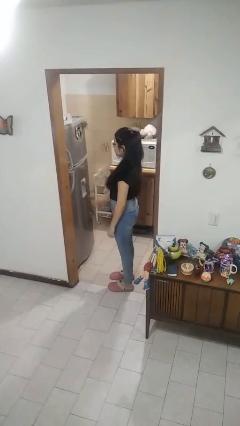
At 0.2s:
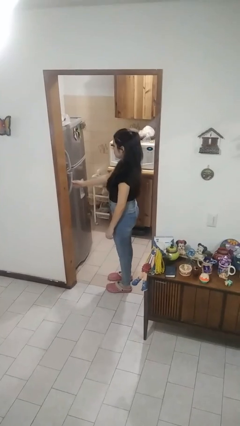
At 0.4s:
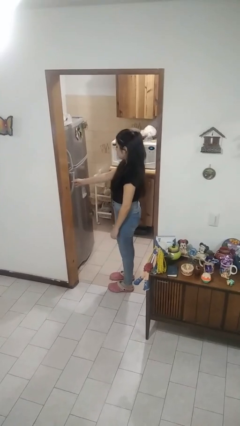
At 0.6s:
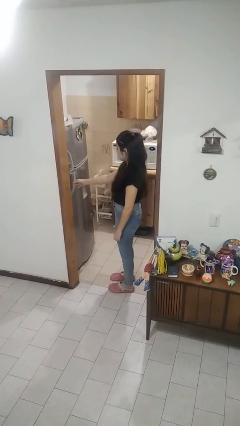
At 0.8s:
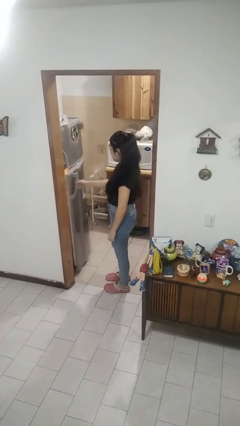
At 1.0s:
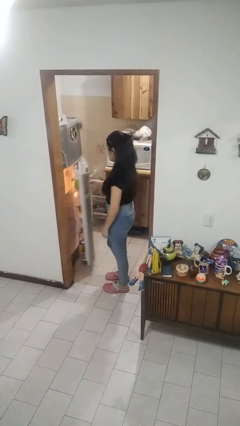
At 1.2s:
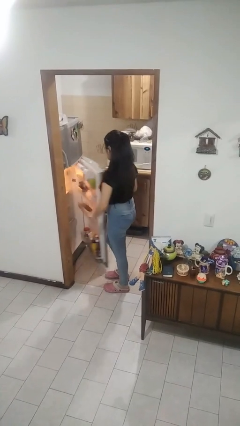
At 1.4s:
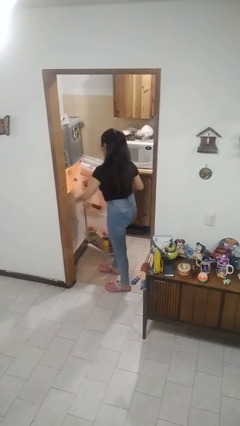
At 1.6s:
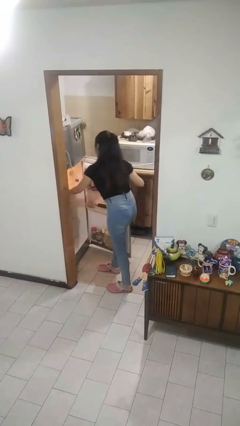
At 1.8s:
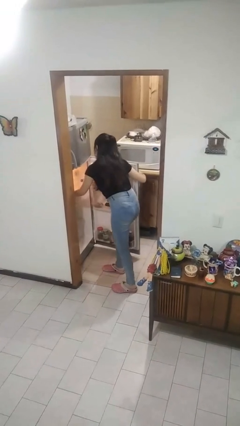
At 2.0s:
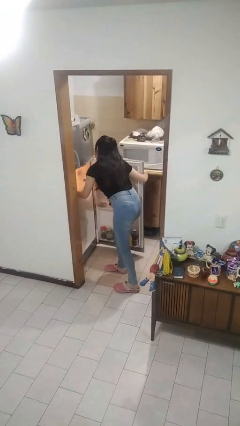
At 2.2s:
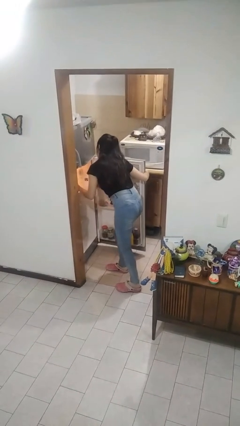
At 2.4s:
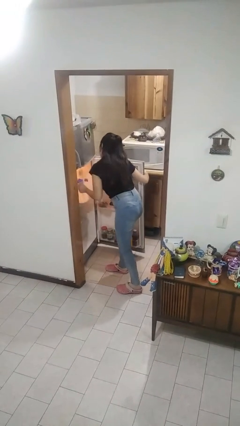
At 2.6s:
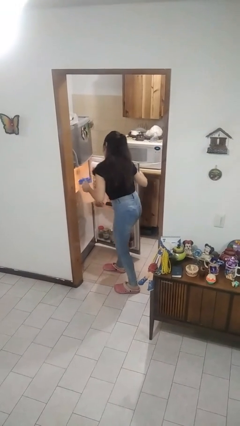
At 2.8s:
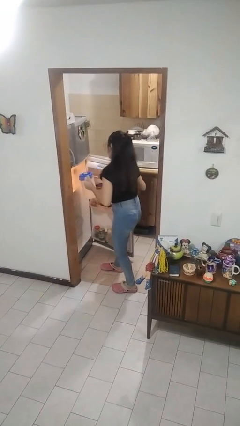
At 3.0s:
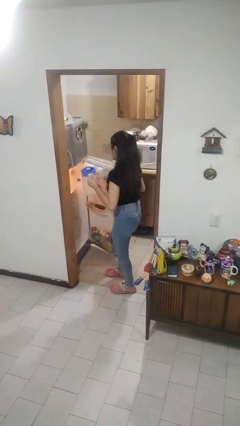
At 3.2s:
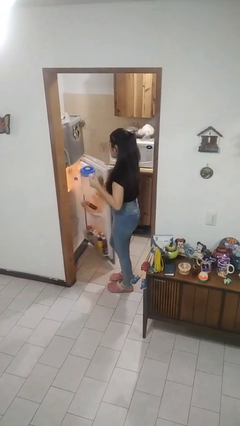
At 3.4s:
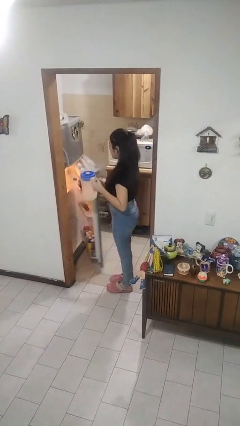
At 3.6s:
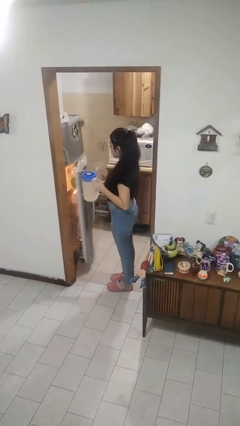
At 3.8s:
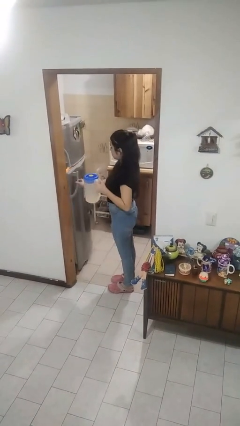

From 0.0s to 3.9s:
person takes object from refrigerator

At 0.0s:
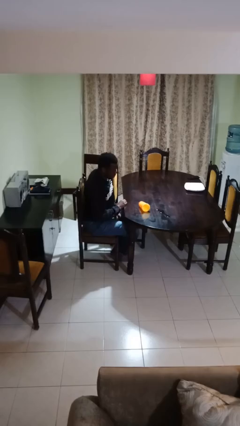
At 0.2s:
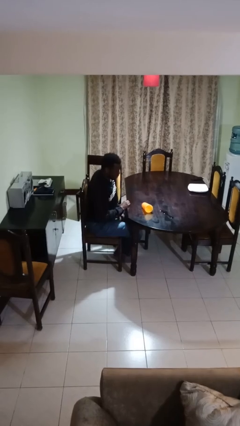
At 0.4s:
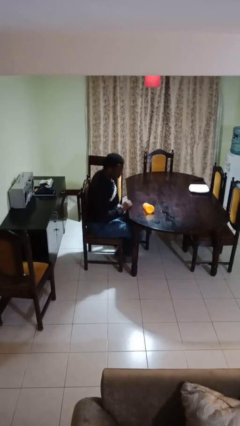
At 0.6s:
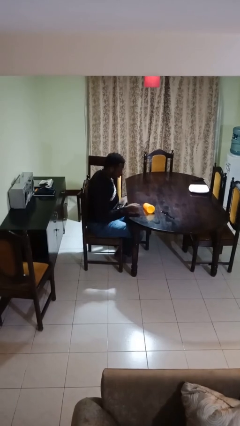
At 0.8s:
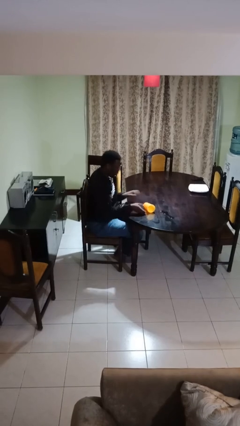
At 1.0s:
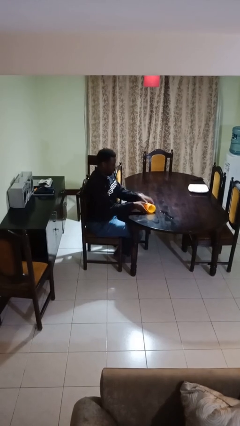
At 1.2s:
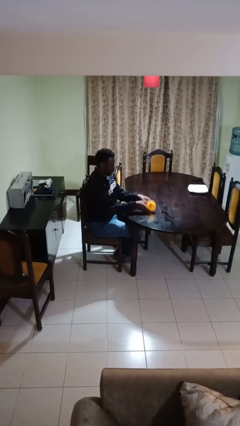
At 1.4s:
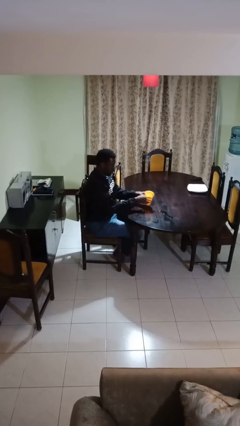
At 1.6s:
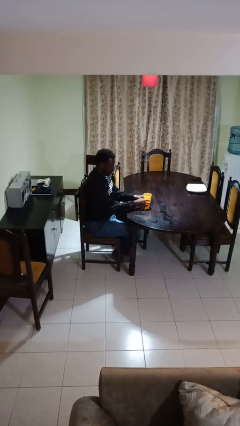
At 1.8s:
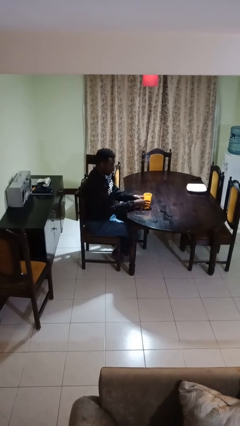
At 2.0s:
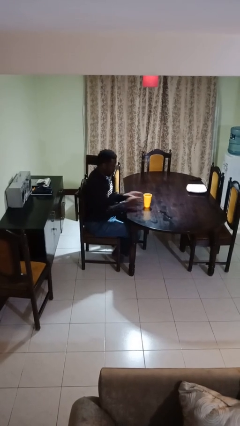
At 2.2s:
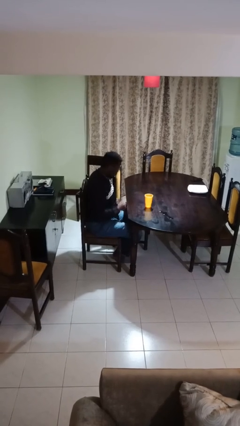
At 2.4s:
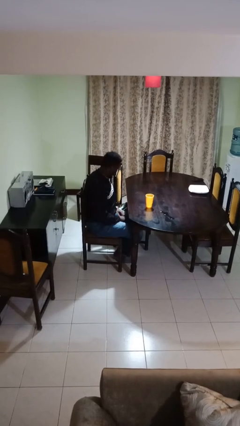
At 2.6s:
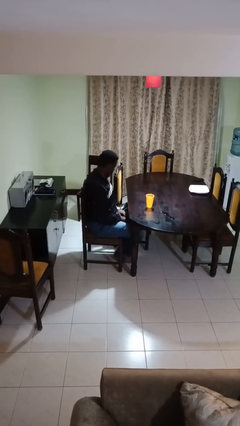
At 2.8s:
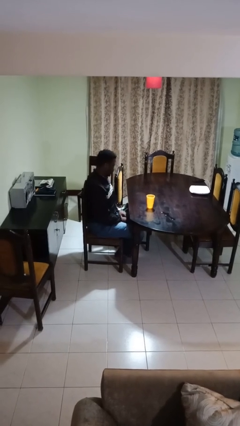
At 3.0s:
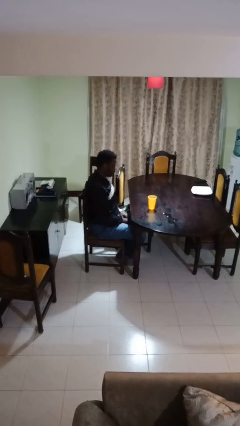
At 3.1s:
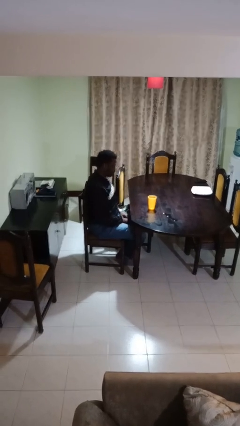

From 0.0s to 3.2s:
person sets upright glass

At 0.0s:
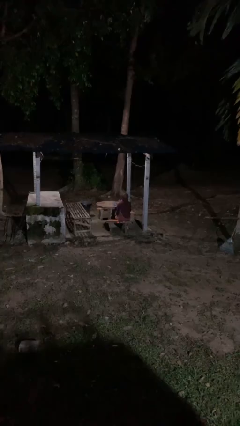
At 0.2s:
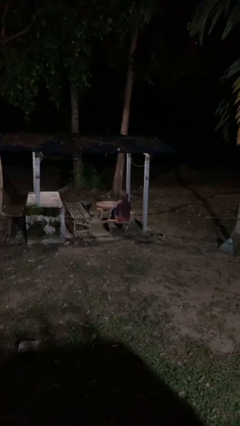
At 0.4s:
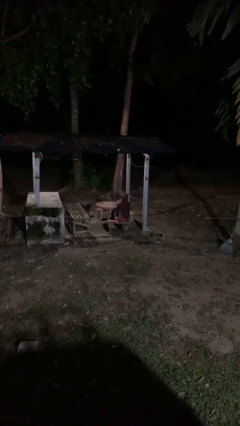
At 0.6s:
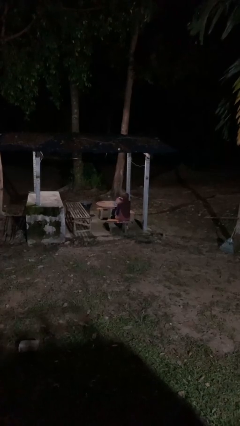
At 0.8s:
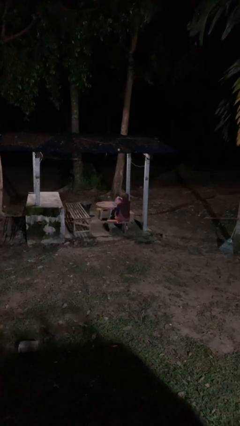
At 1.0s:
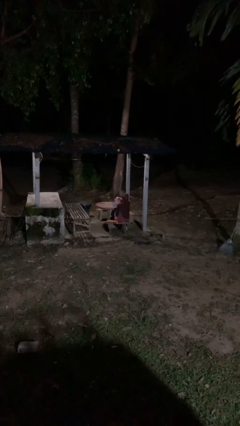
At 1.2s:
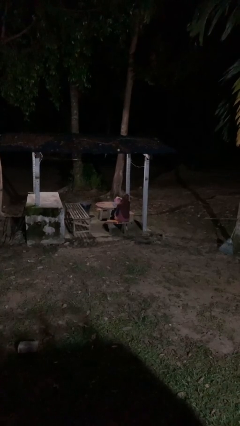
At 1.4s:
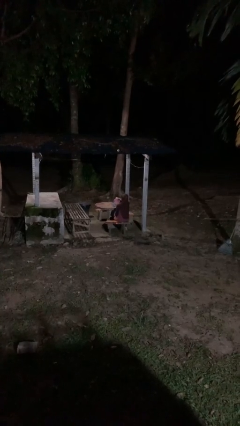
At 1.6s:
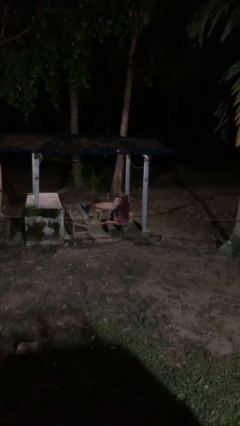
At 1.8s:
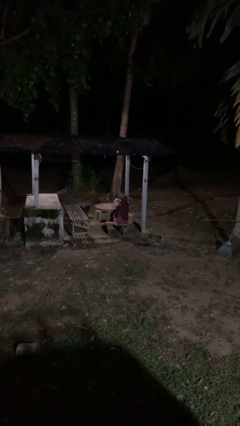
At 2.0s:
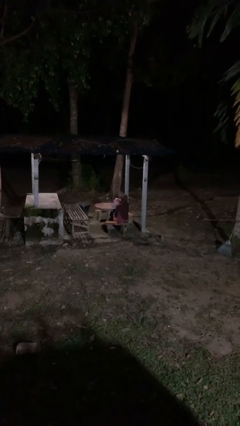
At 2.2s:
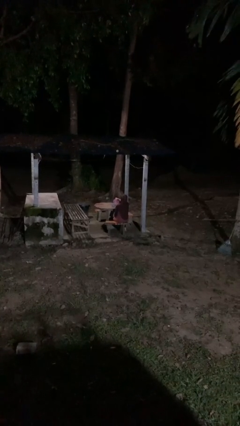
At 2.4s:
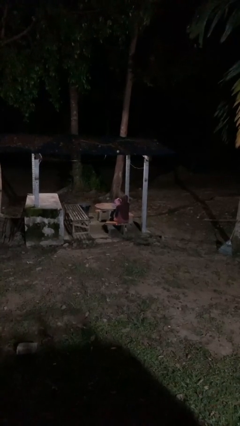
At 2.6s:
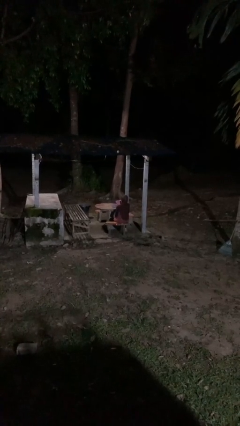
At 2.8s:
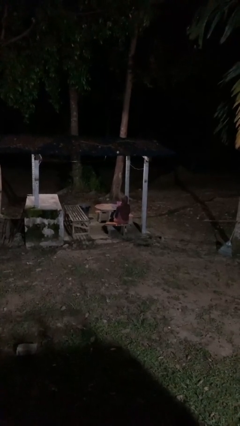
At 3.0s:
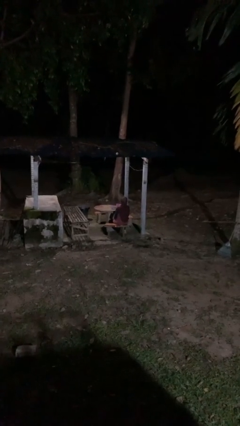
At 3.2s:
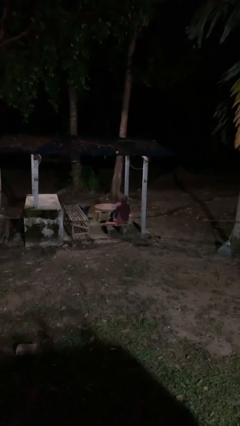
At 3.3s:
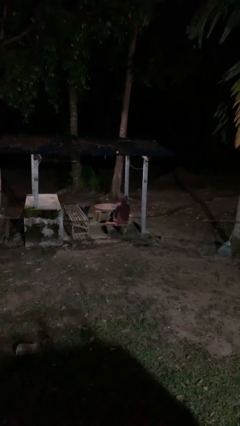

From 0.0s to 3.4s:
person pours coffee into mug

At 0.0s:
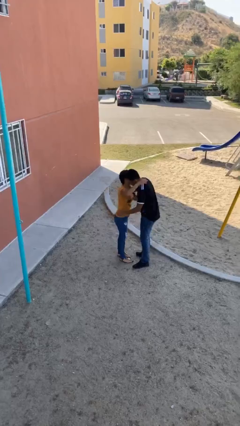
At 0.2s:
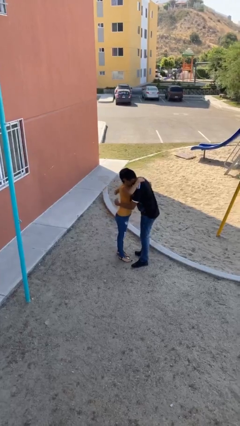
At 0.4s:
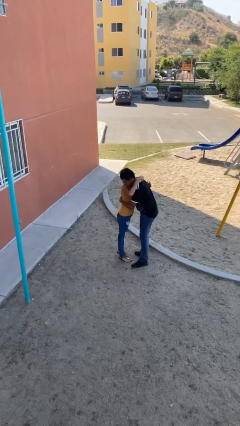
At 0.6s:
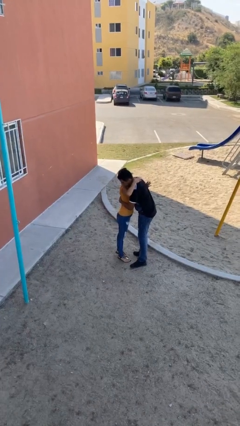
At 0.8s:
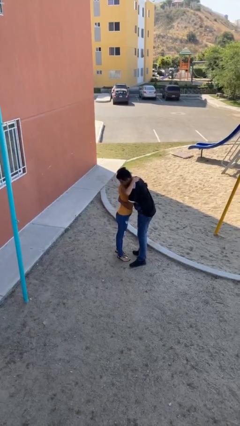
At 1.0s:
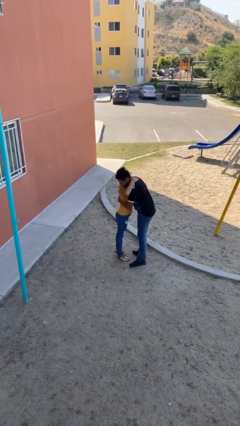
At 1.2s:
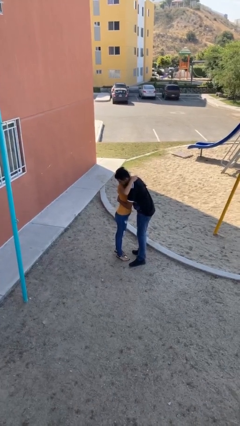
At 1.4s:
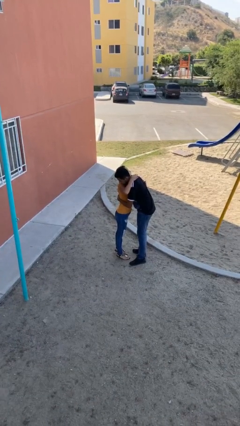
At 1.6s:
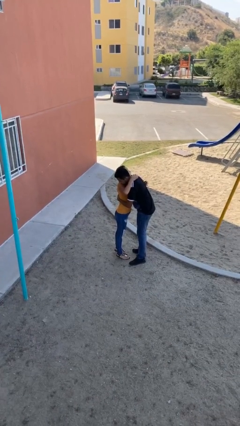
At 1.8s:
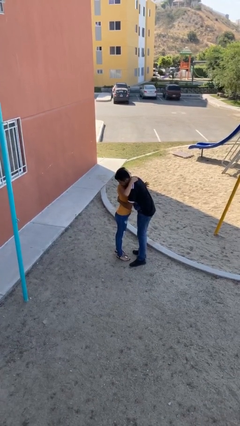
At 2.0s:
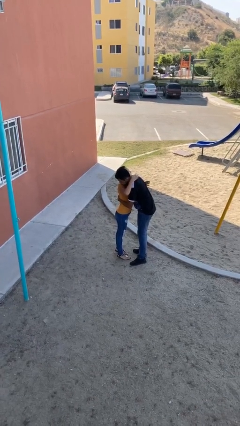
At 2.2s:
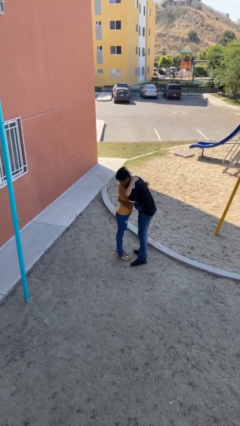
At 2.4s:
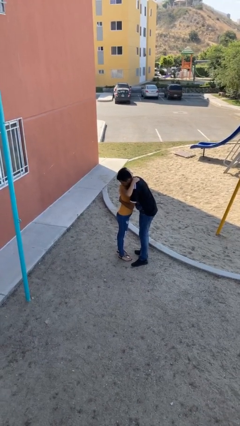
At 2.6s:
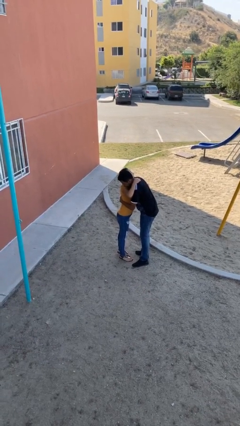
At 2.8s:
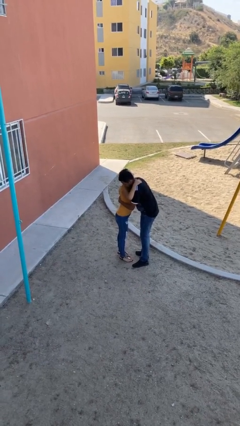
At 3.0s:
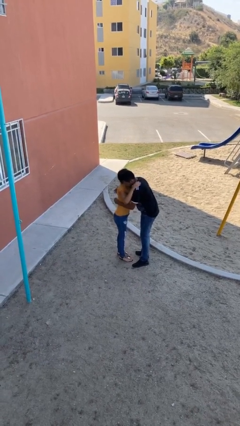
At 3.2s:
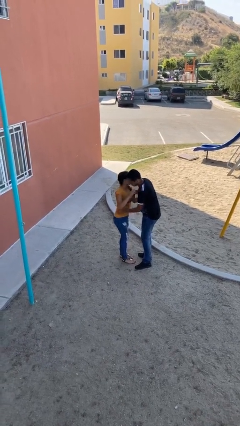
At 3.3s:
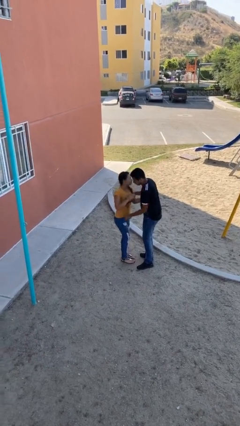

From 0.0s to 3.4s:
person embraces person

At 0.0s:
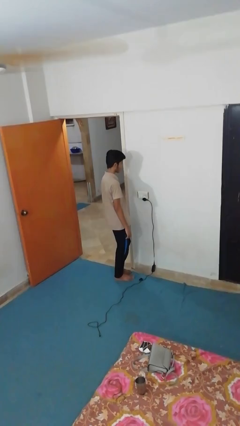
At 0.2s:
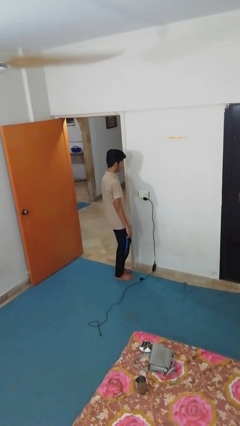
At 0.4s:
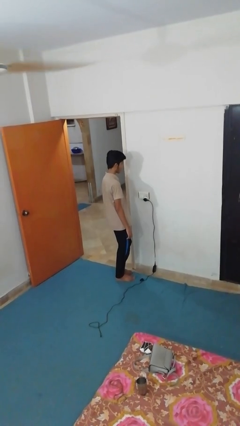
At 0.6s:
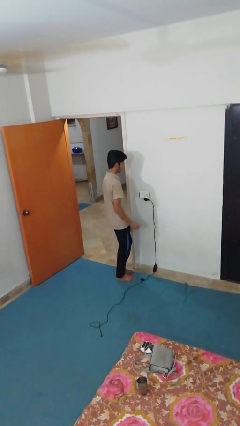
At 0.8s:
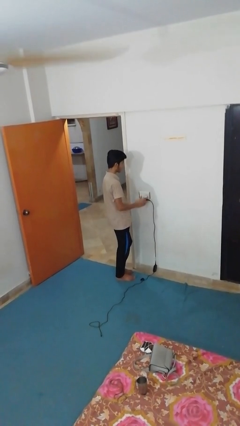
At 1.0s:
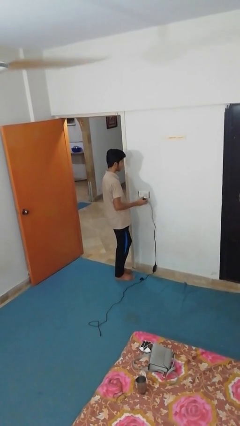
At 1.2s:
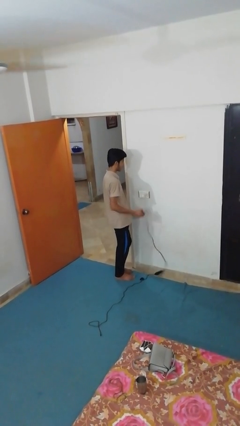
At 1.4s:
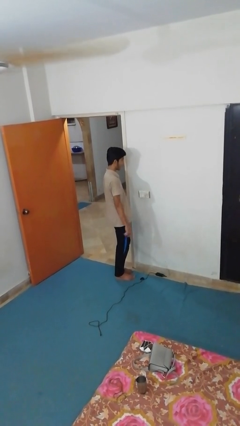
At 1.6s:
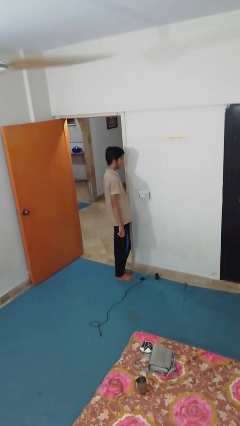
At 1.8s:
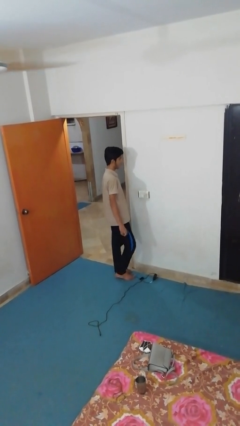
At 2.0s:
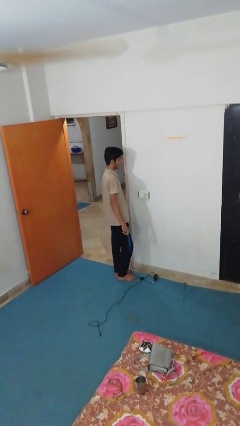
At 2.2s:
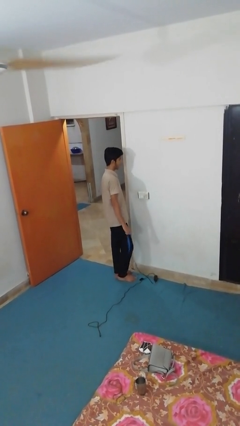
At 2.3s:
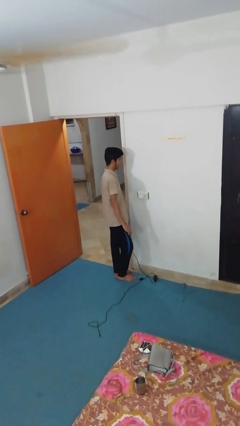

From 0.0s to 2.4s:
person unplugs from electrical socket

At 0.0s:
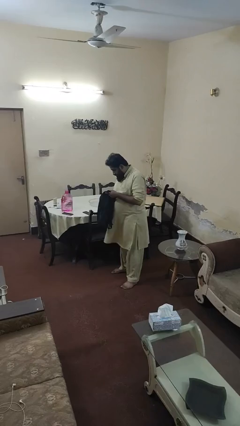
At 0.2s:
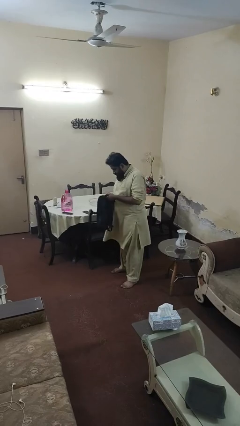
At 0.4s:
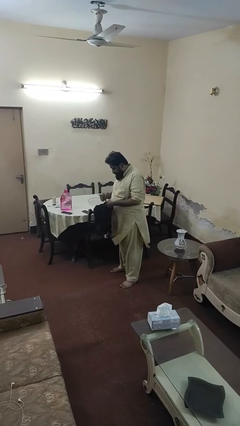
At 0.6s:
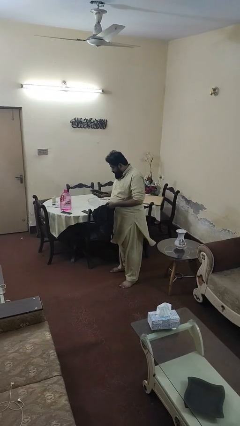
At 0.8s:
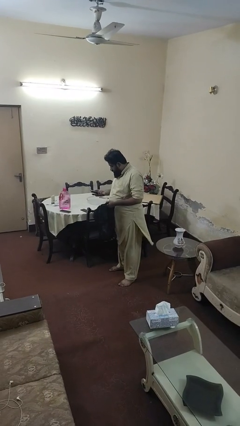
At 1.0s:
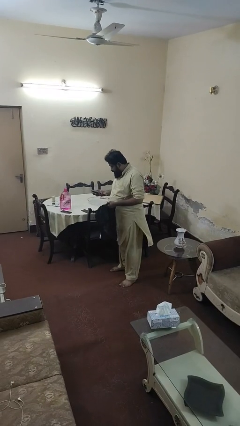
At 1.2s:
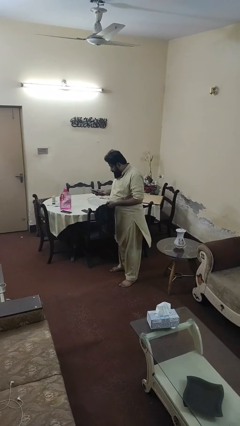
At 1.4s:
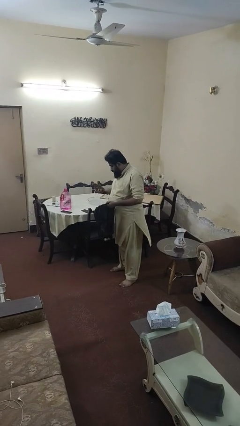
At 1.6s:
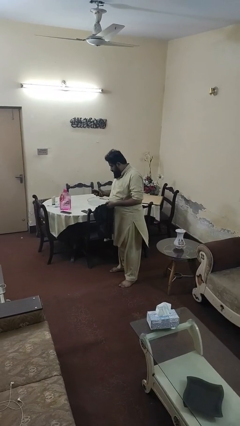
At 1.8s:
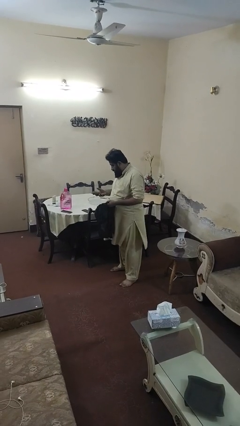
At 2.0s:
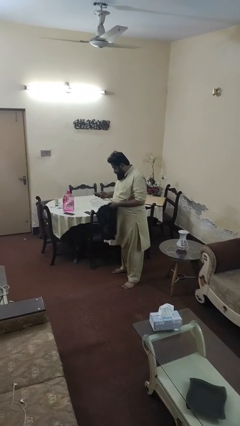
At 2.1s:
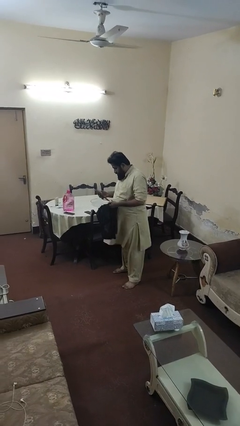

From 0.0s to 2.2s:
person takes object from backpack
